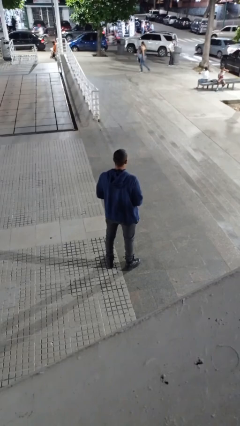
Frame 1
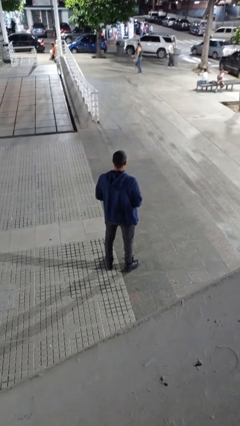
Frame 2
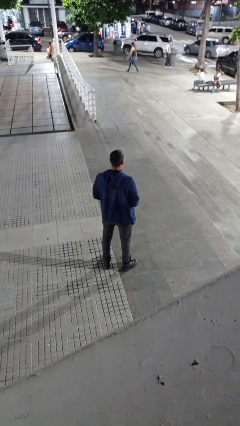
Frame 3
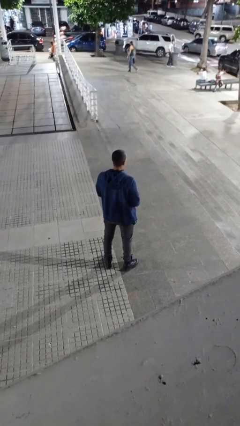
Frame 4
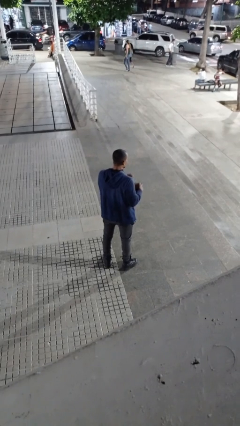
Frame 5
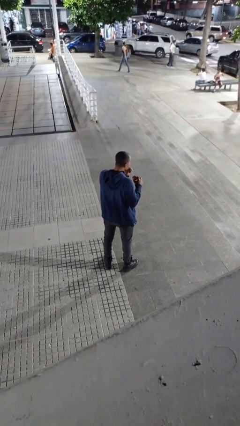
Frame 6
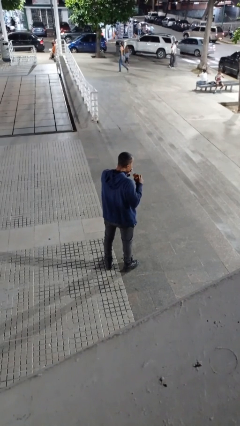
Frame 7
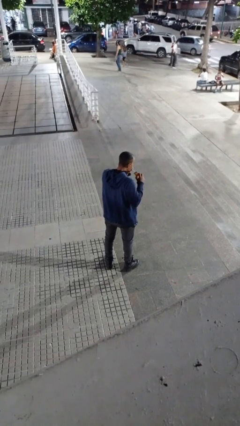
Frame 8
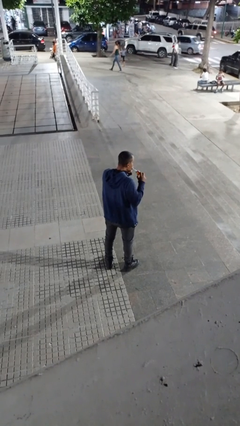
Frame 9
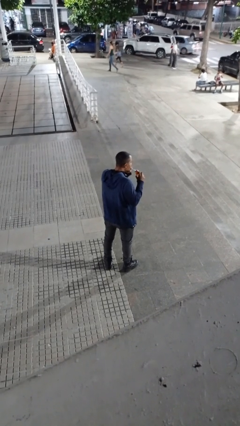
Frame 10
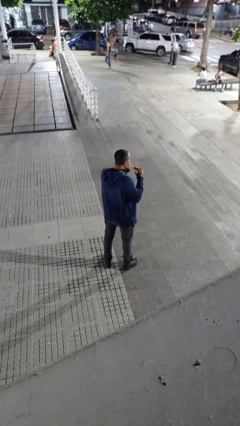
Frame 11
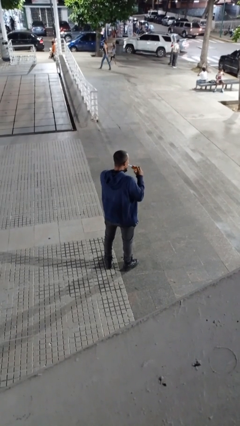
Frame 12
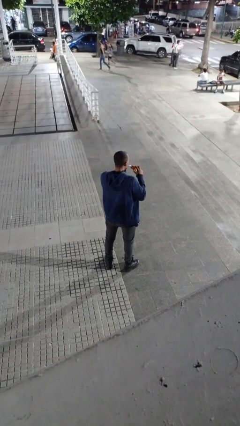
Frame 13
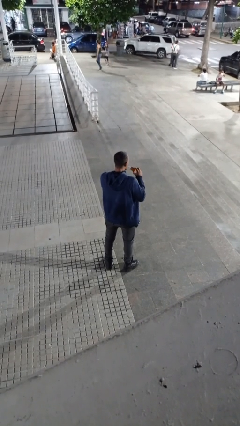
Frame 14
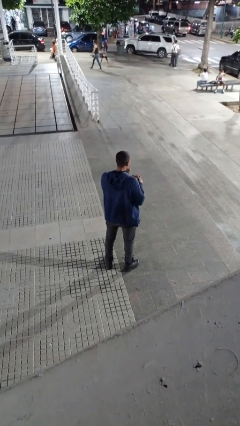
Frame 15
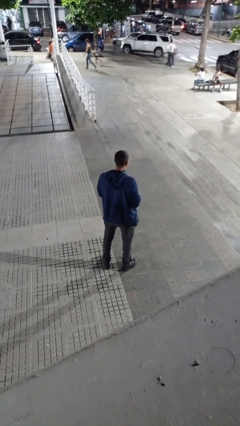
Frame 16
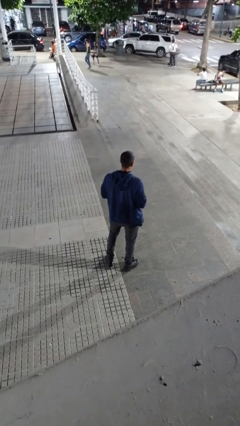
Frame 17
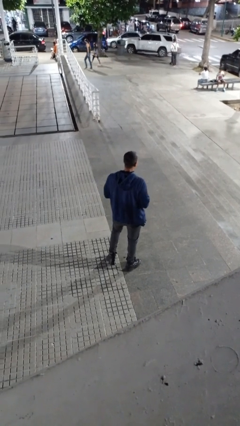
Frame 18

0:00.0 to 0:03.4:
person drinks from straw

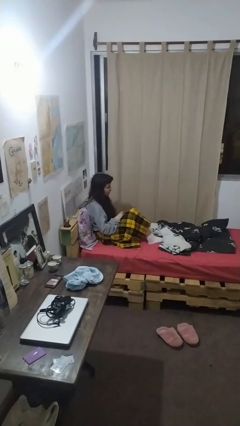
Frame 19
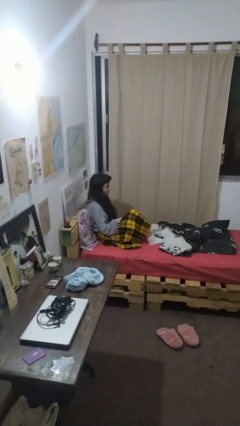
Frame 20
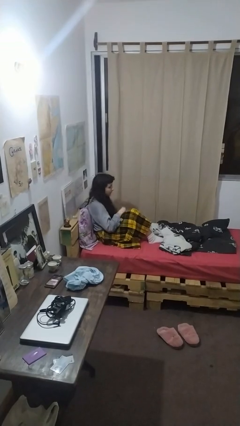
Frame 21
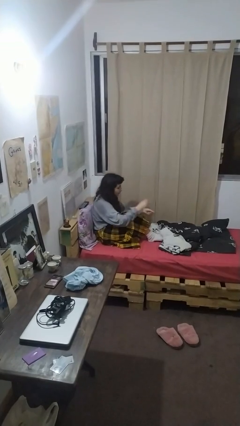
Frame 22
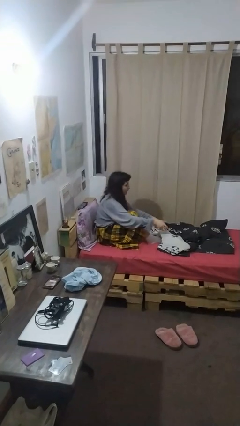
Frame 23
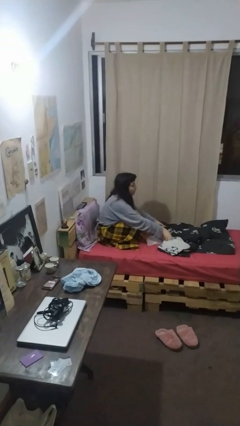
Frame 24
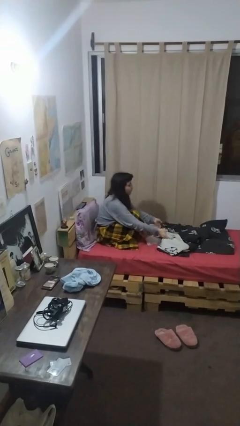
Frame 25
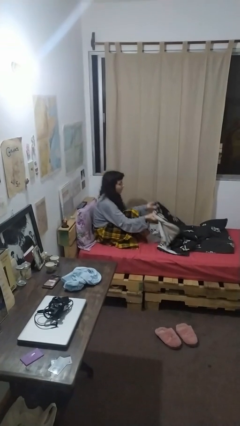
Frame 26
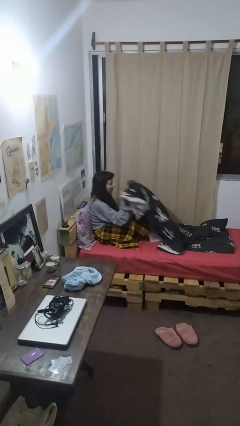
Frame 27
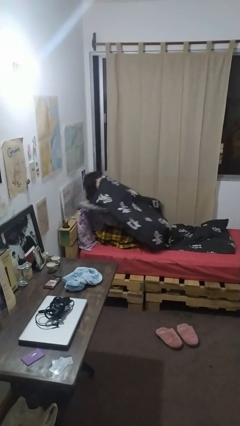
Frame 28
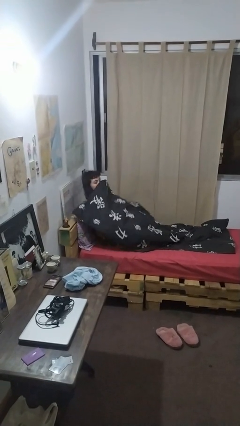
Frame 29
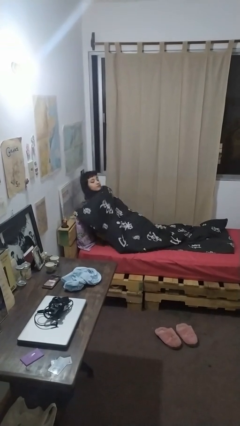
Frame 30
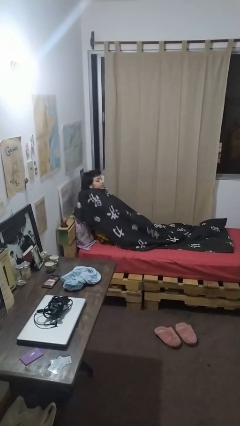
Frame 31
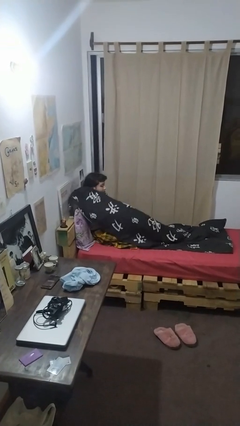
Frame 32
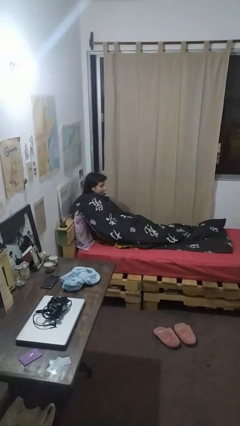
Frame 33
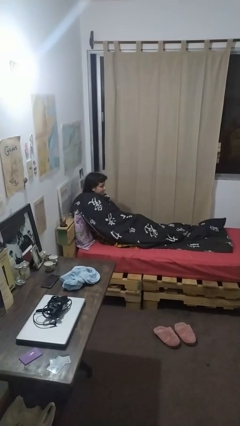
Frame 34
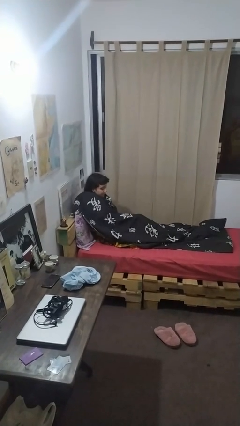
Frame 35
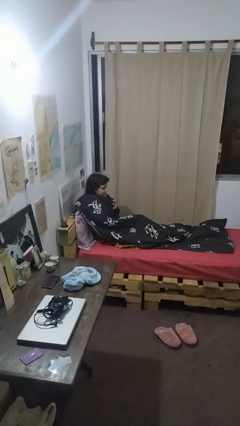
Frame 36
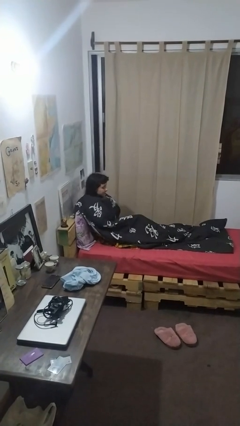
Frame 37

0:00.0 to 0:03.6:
person covers with blanket

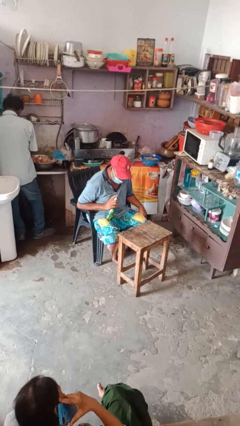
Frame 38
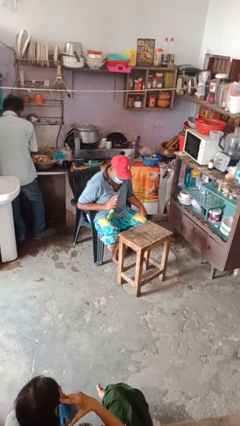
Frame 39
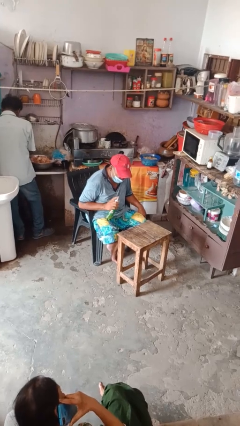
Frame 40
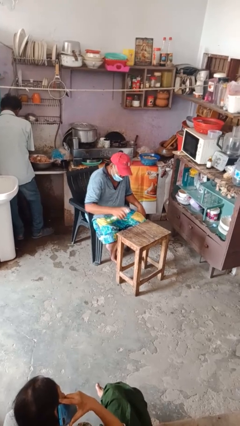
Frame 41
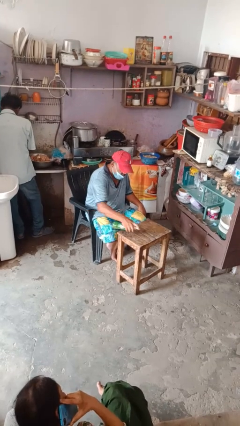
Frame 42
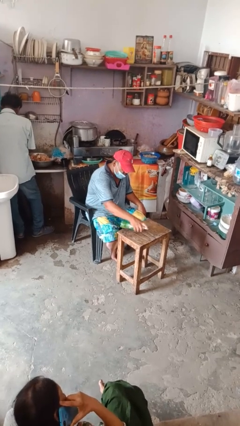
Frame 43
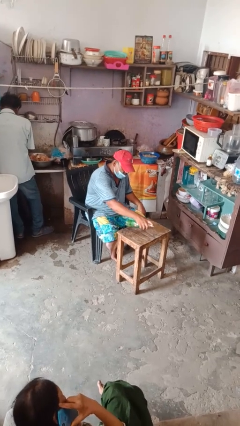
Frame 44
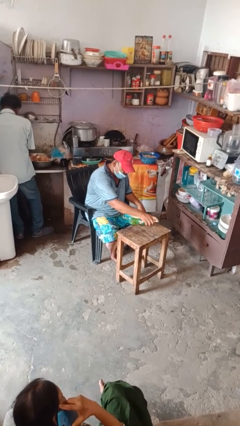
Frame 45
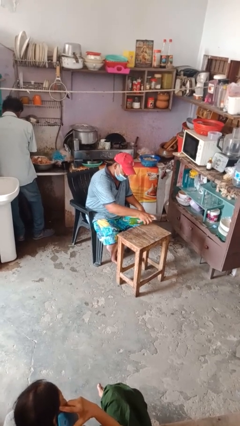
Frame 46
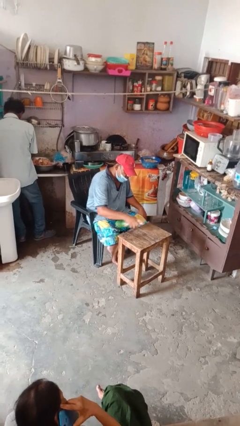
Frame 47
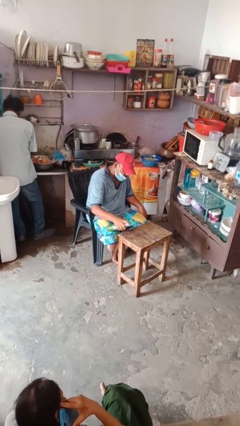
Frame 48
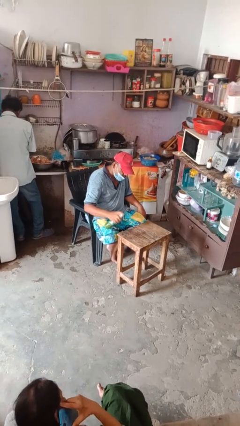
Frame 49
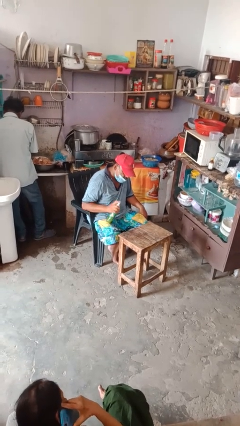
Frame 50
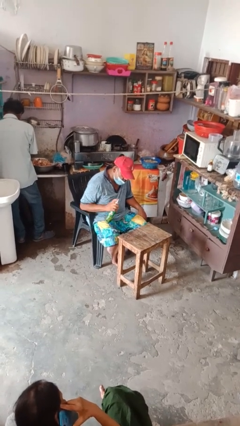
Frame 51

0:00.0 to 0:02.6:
person sprays from bottle

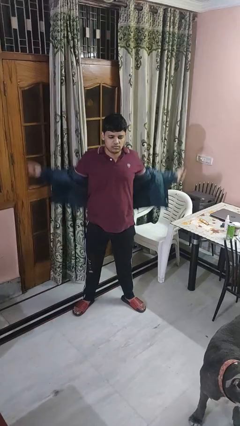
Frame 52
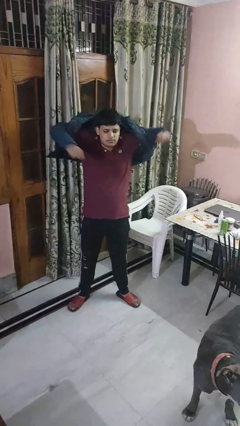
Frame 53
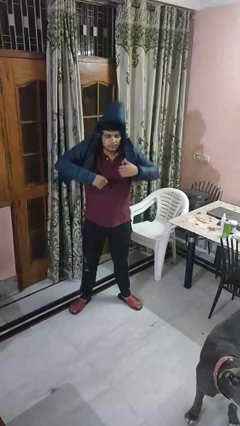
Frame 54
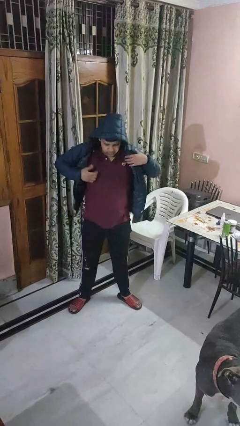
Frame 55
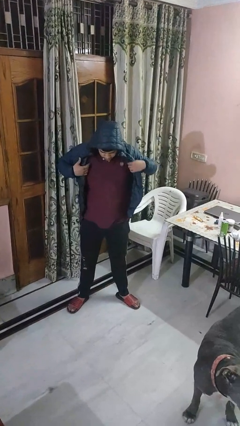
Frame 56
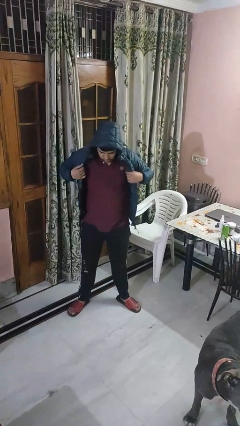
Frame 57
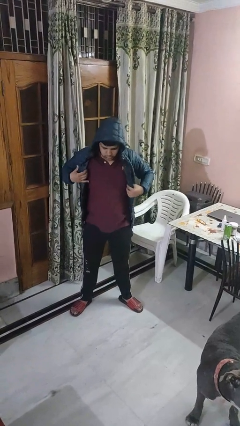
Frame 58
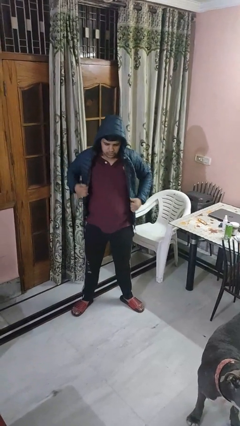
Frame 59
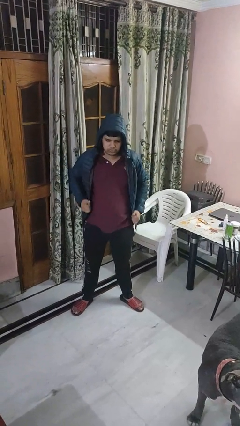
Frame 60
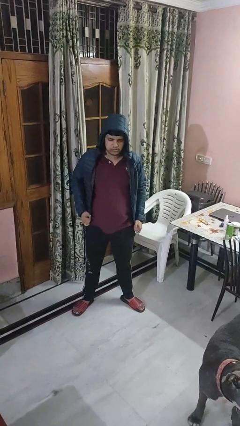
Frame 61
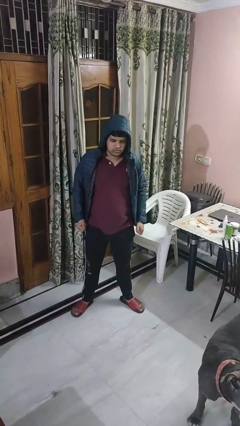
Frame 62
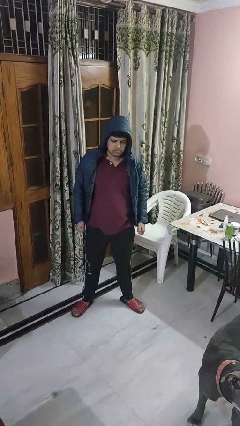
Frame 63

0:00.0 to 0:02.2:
person puts on hoodie

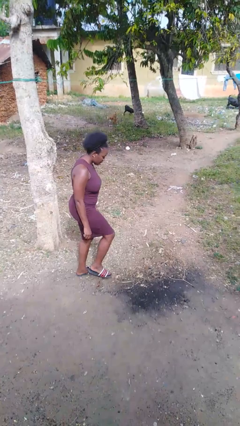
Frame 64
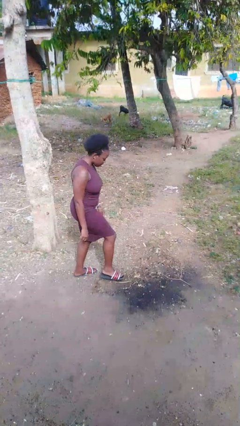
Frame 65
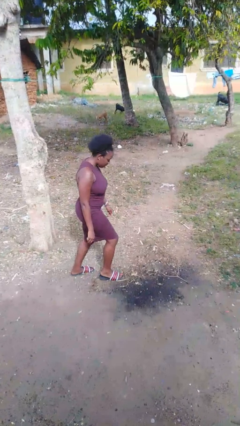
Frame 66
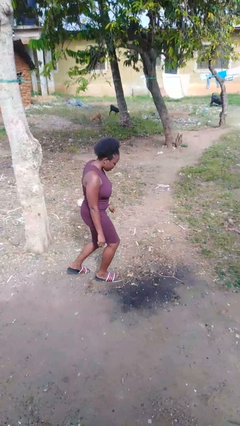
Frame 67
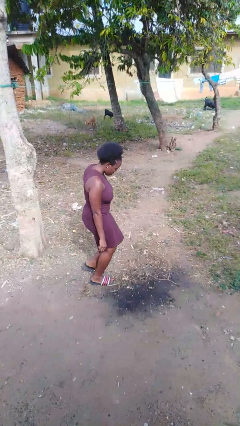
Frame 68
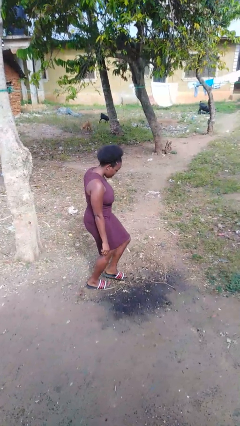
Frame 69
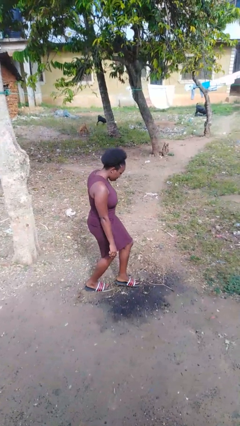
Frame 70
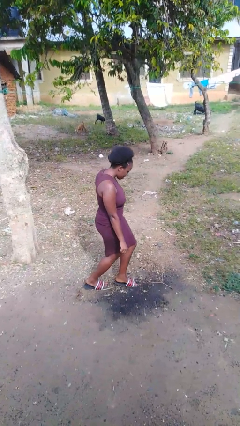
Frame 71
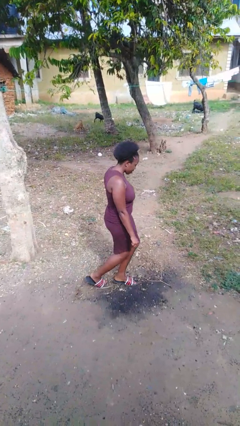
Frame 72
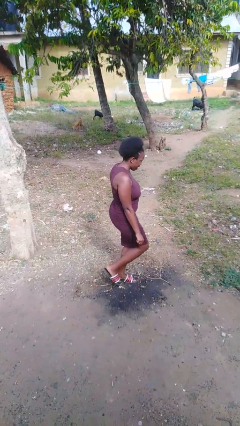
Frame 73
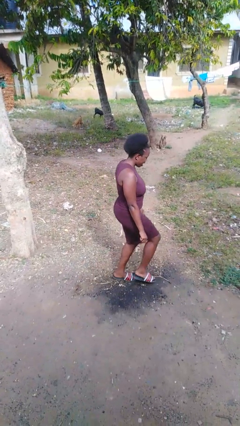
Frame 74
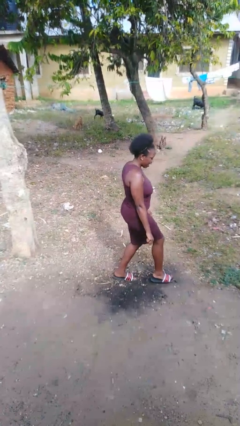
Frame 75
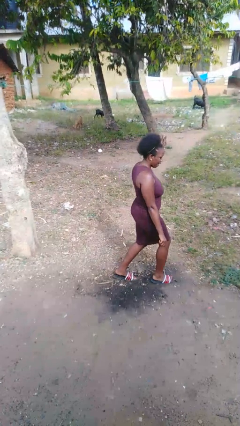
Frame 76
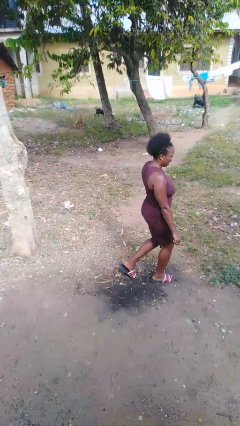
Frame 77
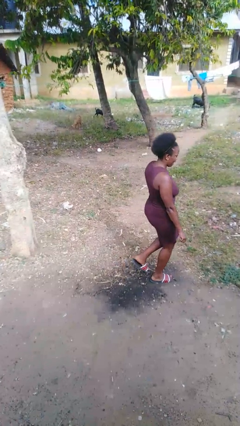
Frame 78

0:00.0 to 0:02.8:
person walks tiptoe

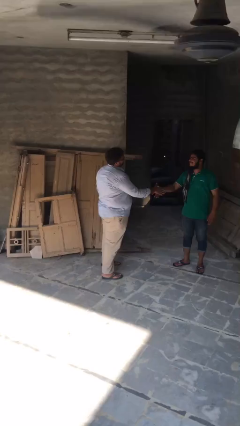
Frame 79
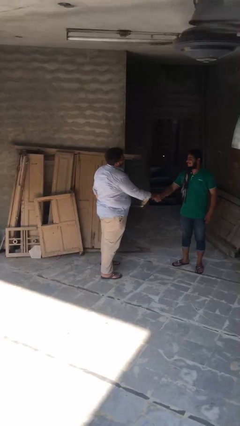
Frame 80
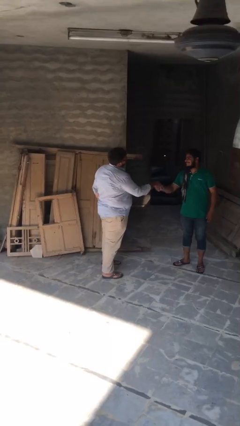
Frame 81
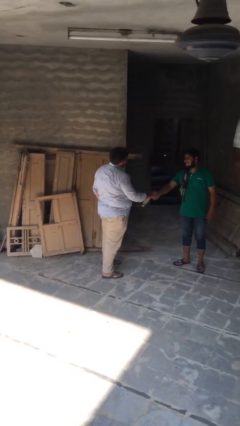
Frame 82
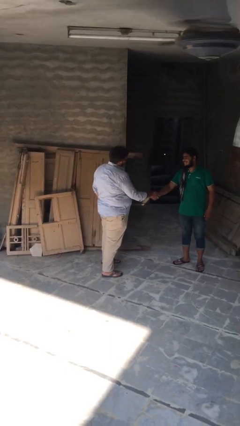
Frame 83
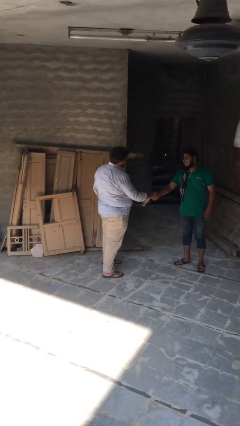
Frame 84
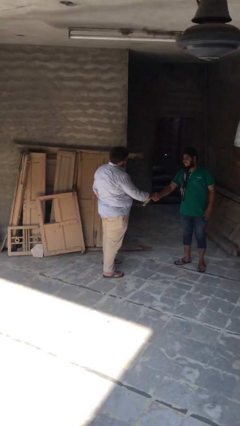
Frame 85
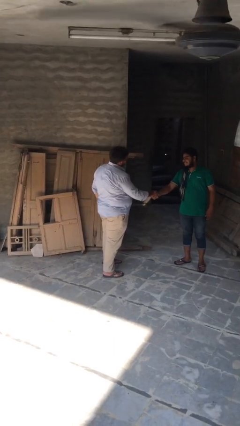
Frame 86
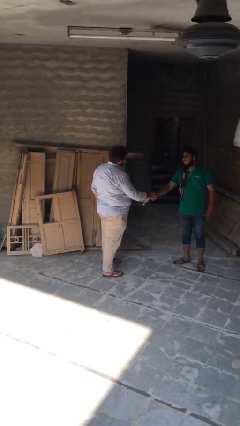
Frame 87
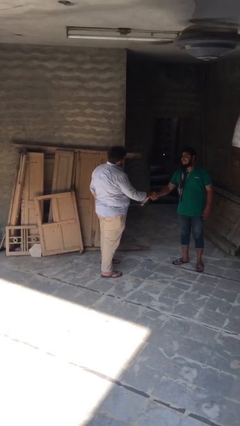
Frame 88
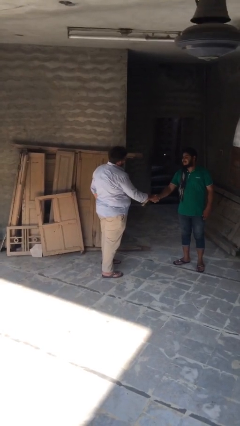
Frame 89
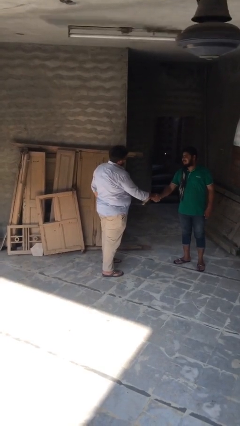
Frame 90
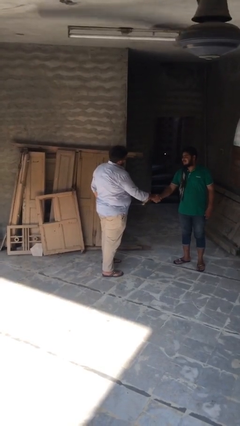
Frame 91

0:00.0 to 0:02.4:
person shakes hand

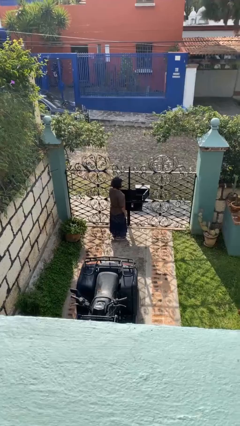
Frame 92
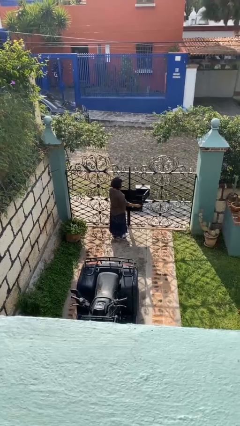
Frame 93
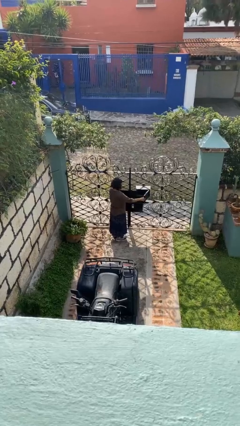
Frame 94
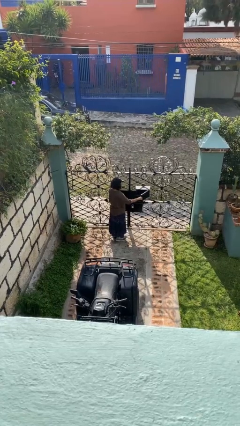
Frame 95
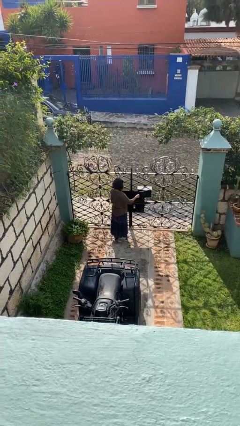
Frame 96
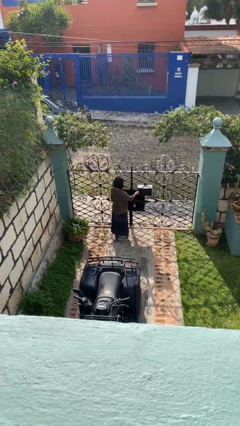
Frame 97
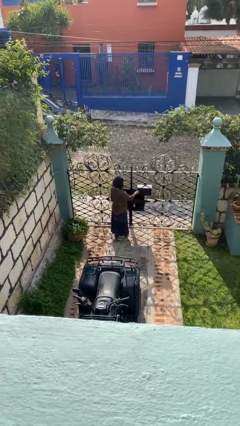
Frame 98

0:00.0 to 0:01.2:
person closes mailbox
